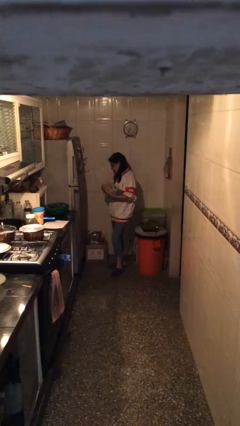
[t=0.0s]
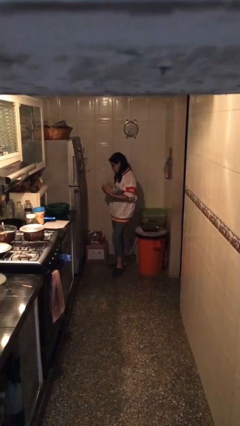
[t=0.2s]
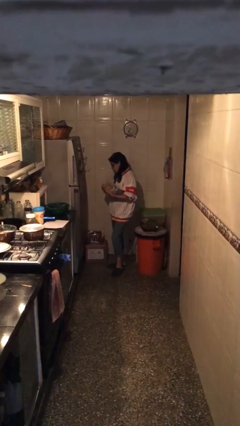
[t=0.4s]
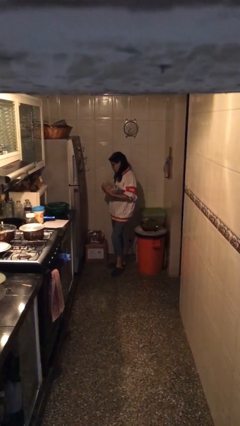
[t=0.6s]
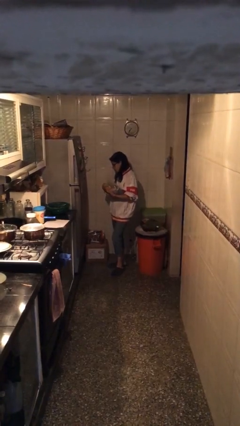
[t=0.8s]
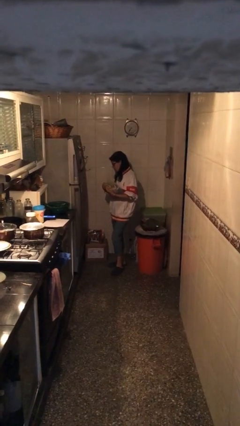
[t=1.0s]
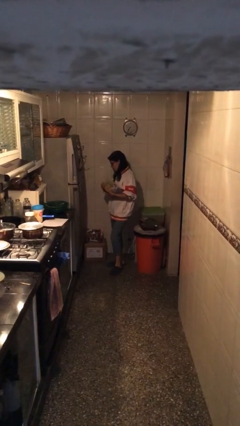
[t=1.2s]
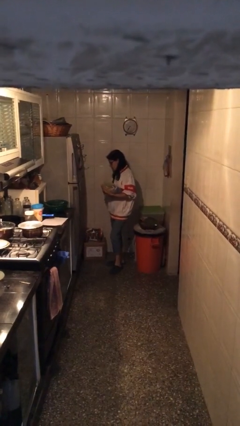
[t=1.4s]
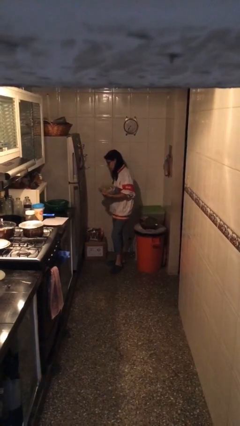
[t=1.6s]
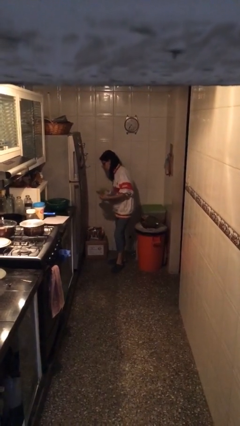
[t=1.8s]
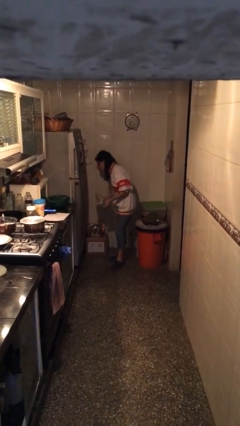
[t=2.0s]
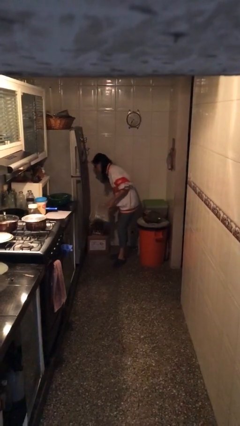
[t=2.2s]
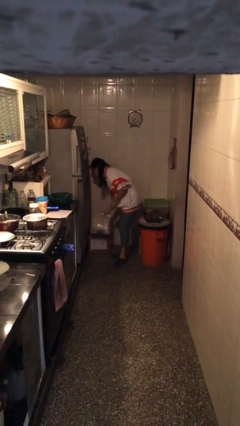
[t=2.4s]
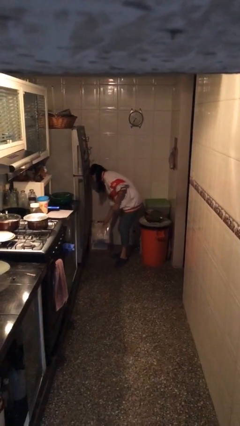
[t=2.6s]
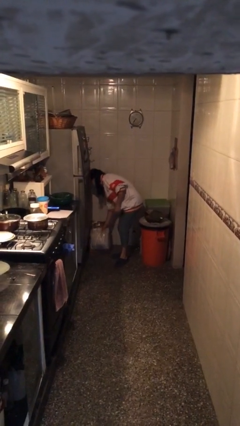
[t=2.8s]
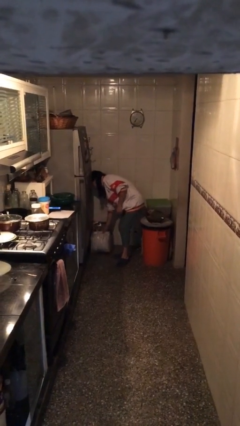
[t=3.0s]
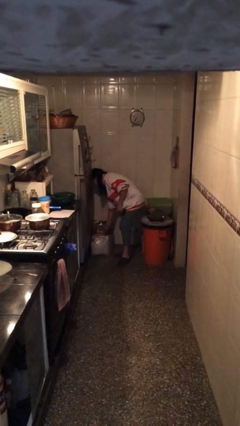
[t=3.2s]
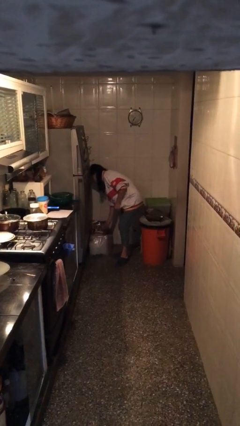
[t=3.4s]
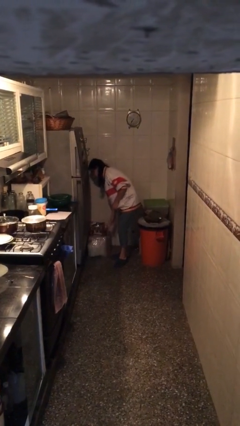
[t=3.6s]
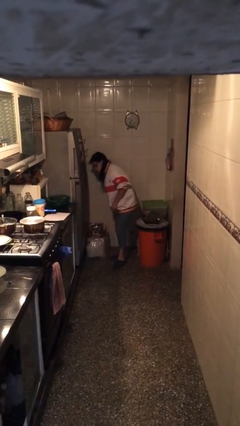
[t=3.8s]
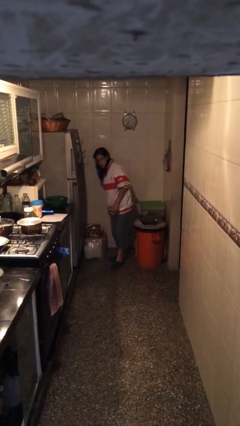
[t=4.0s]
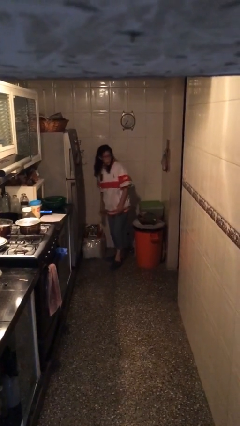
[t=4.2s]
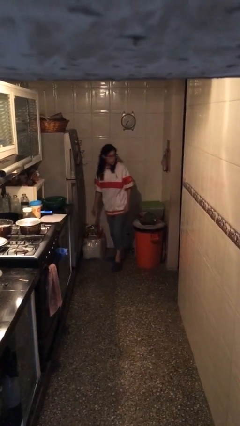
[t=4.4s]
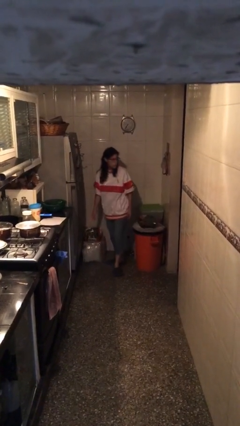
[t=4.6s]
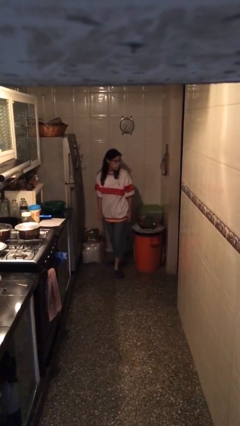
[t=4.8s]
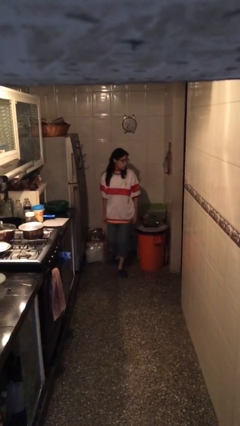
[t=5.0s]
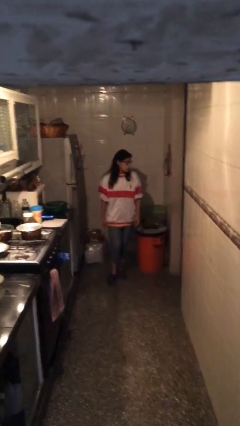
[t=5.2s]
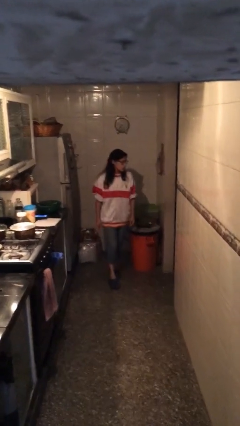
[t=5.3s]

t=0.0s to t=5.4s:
person puts down object on floor

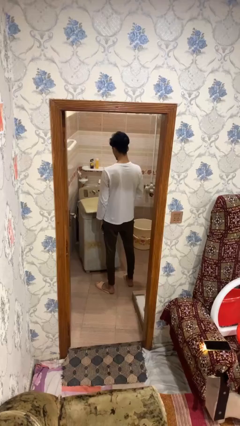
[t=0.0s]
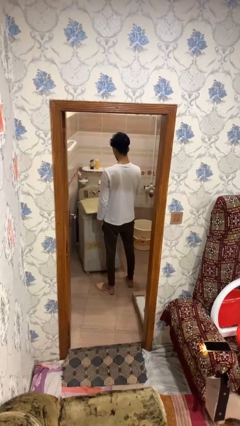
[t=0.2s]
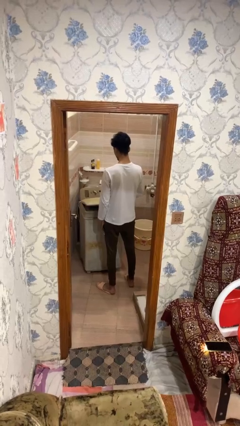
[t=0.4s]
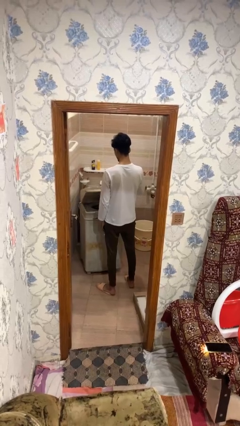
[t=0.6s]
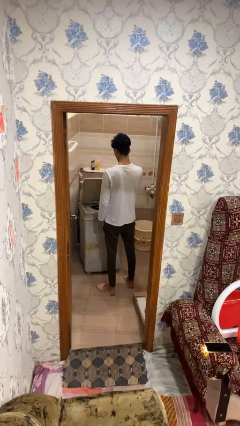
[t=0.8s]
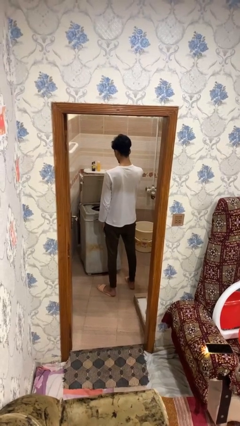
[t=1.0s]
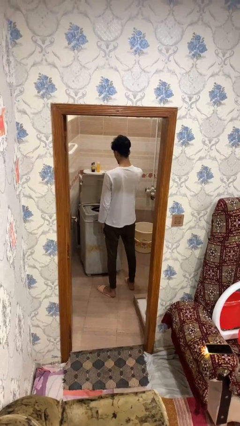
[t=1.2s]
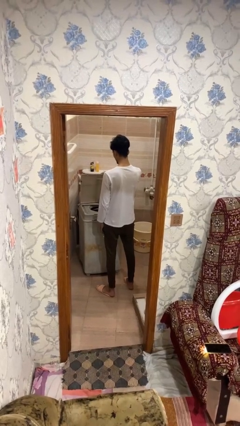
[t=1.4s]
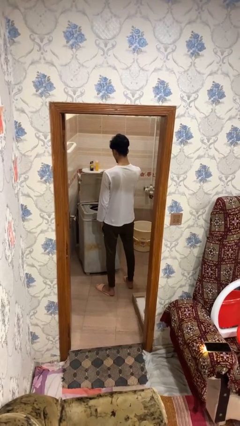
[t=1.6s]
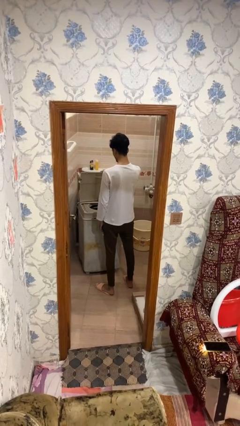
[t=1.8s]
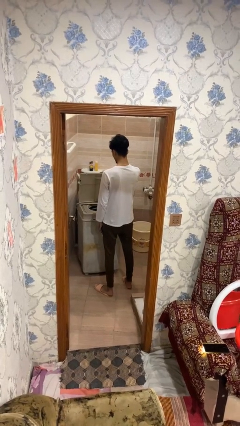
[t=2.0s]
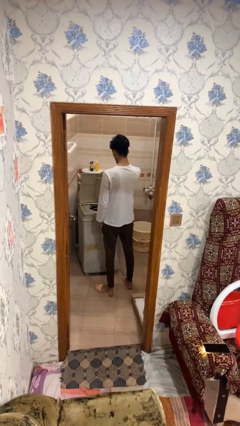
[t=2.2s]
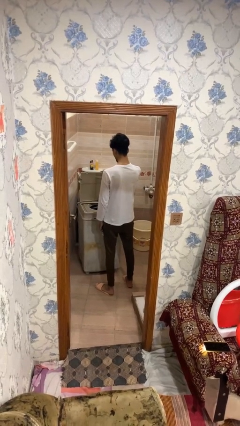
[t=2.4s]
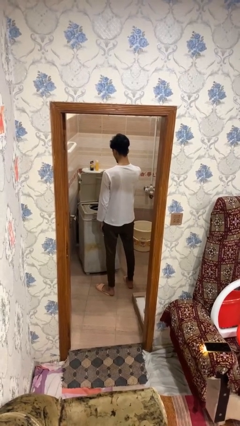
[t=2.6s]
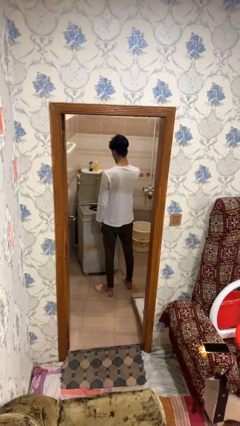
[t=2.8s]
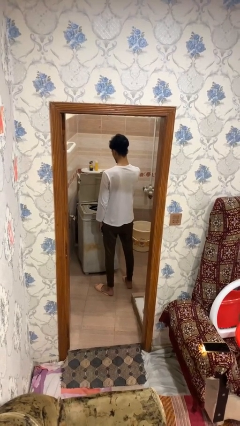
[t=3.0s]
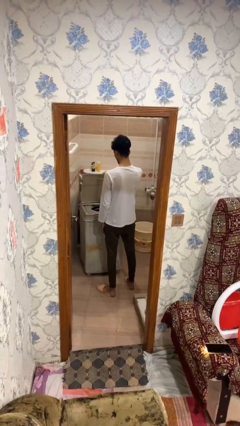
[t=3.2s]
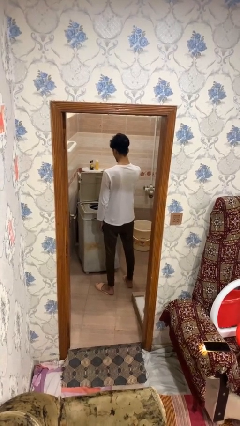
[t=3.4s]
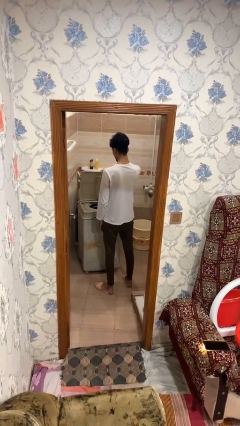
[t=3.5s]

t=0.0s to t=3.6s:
person opens clothes washer

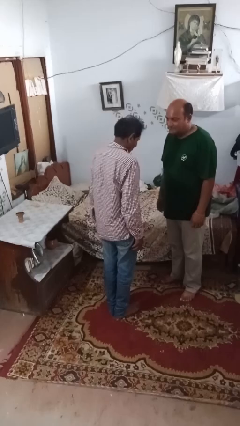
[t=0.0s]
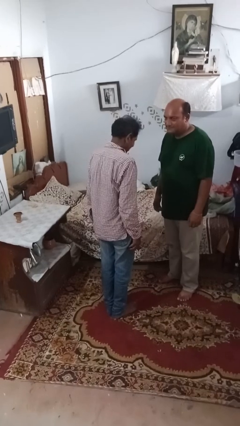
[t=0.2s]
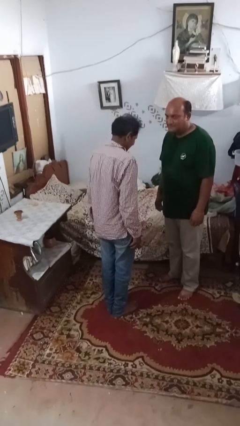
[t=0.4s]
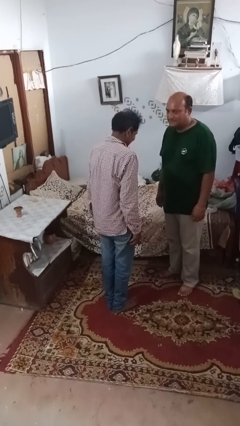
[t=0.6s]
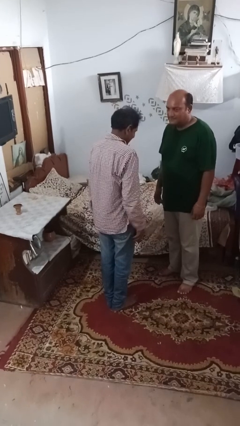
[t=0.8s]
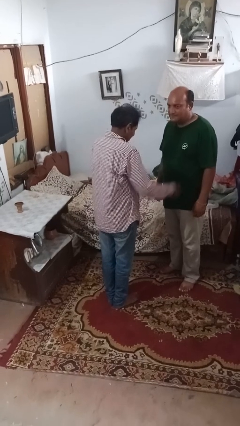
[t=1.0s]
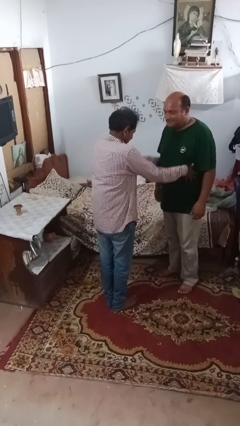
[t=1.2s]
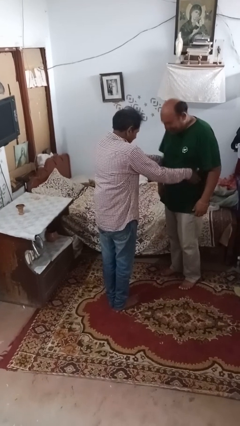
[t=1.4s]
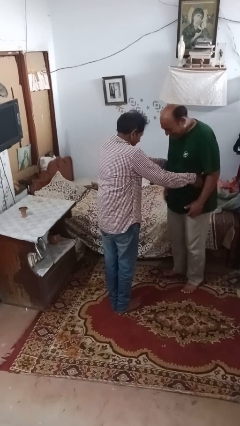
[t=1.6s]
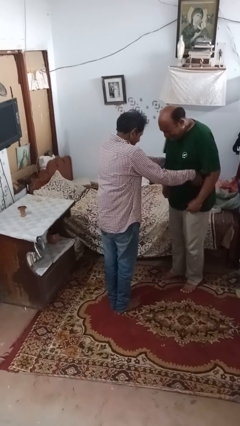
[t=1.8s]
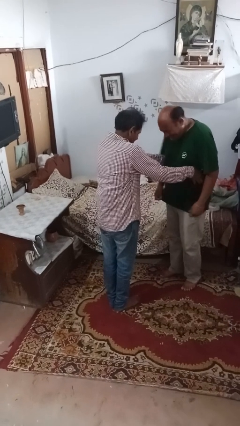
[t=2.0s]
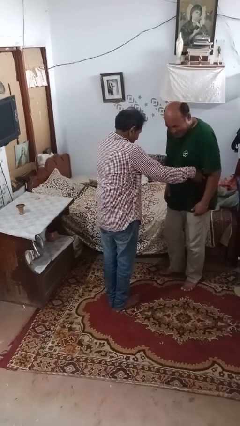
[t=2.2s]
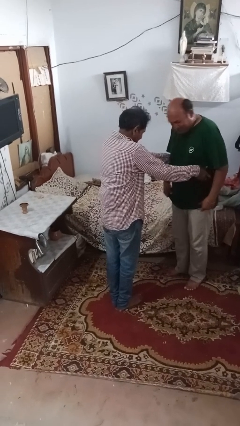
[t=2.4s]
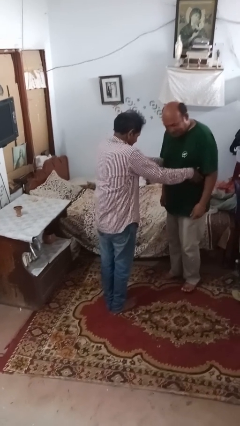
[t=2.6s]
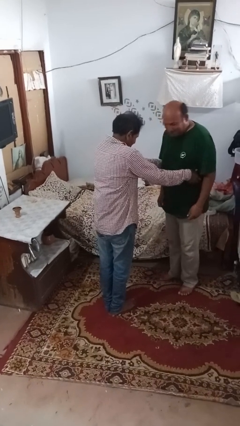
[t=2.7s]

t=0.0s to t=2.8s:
person tickles person

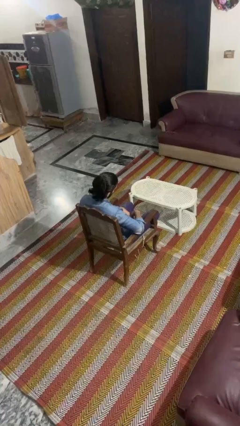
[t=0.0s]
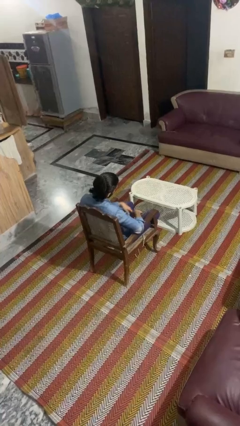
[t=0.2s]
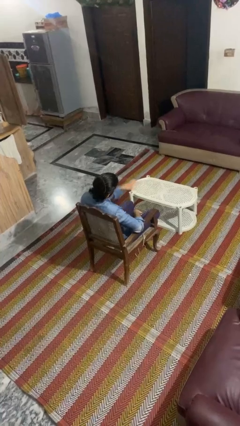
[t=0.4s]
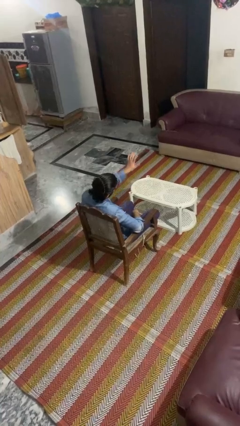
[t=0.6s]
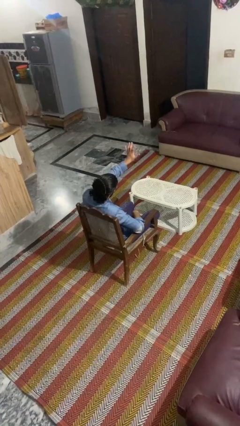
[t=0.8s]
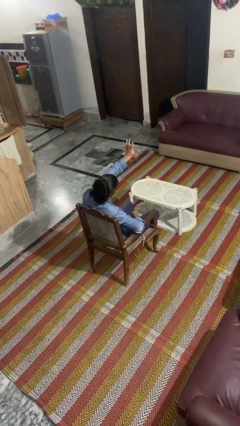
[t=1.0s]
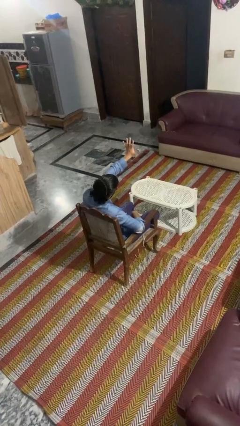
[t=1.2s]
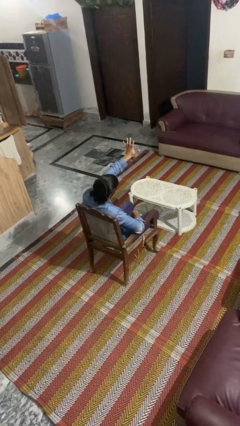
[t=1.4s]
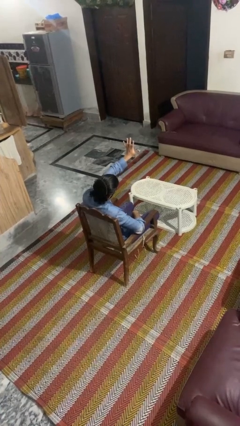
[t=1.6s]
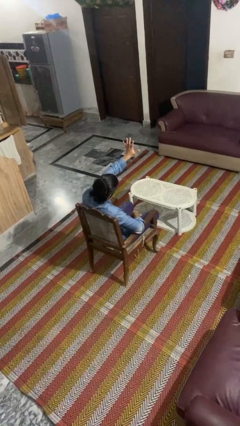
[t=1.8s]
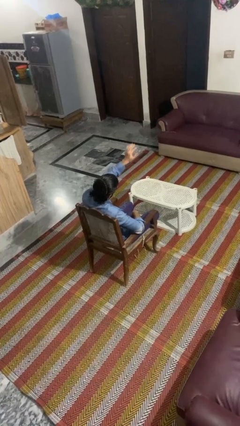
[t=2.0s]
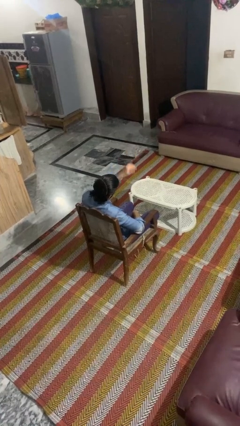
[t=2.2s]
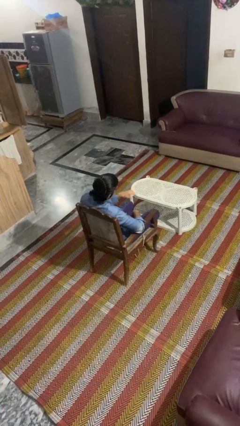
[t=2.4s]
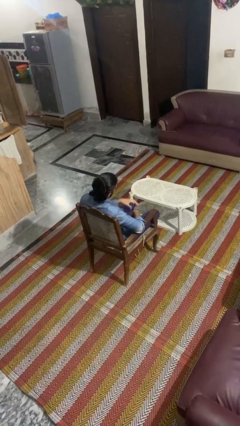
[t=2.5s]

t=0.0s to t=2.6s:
person gestures number five

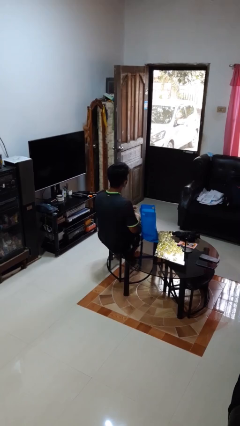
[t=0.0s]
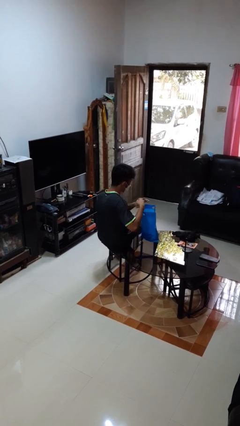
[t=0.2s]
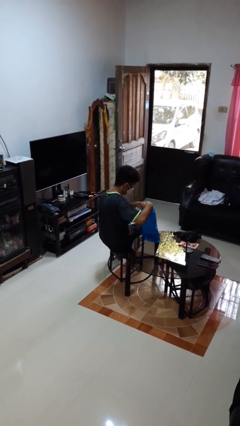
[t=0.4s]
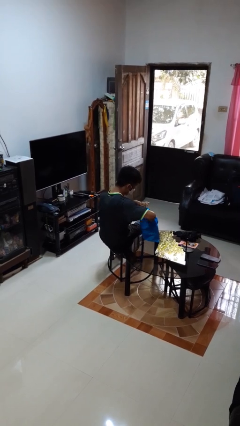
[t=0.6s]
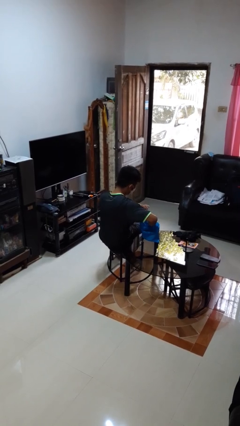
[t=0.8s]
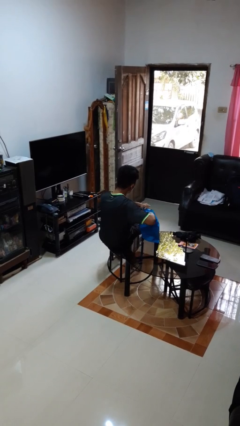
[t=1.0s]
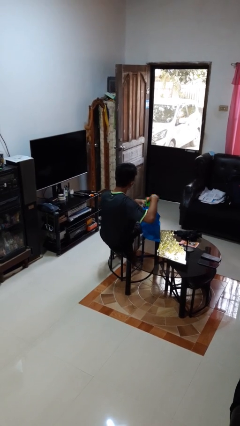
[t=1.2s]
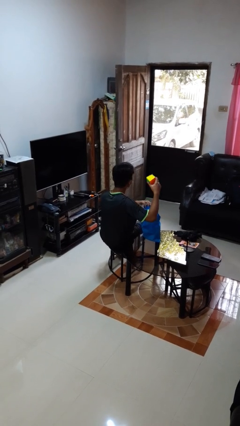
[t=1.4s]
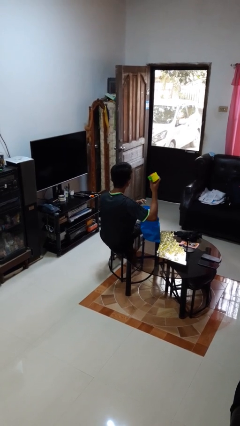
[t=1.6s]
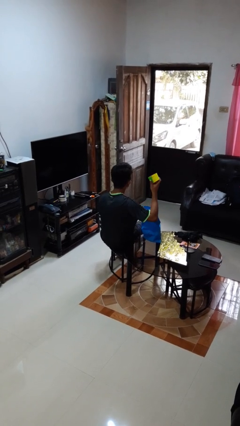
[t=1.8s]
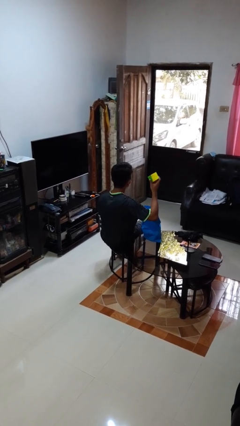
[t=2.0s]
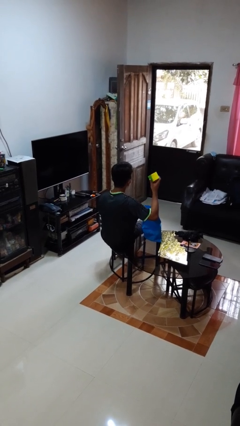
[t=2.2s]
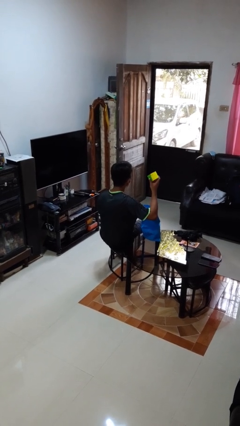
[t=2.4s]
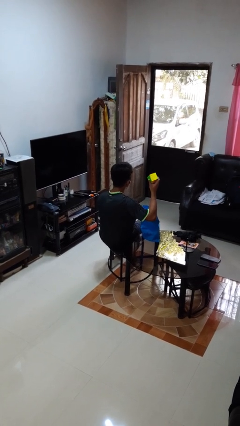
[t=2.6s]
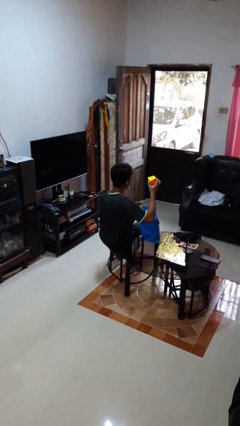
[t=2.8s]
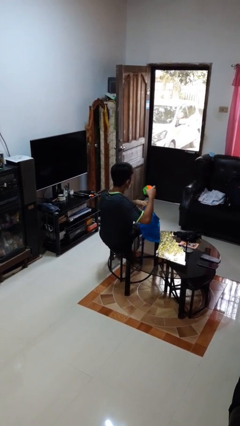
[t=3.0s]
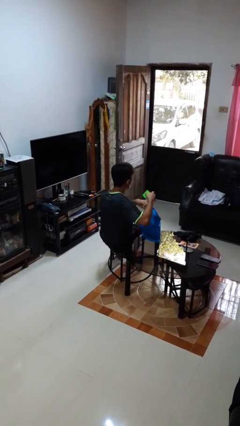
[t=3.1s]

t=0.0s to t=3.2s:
person takes object from bag
